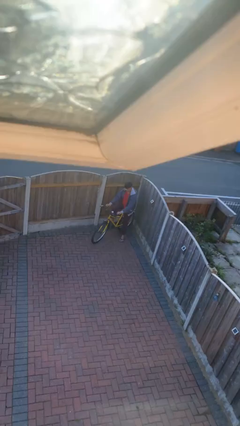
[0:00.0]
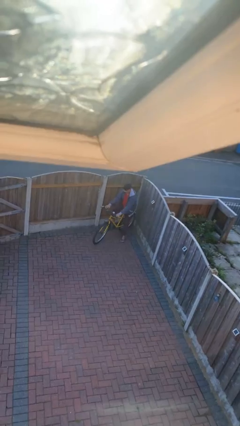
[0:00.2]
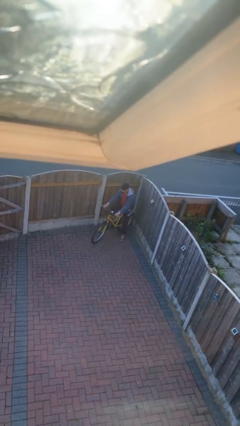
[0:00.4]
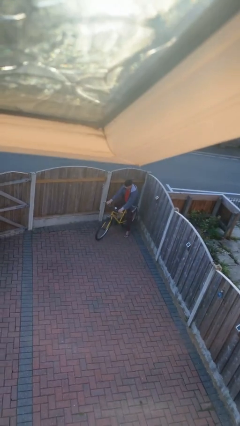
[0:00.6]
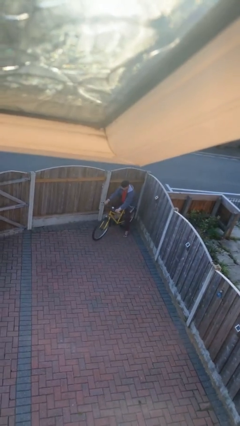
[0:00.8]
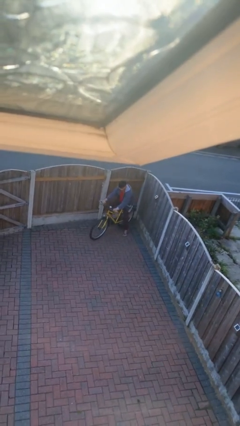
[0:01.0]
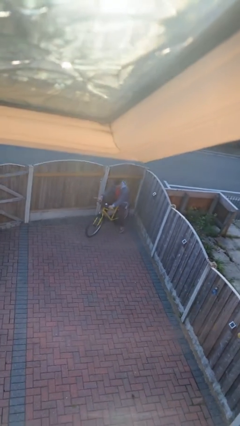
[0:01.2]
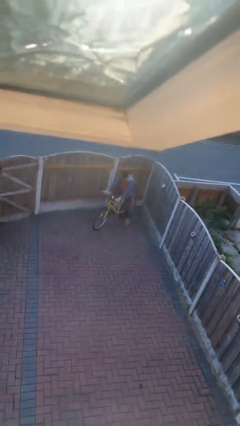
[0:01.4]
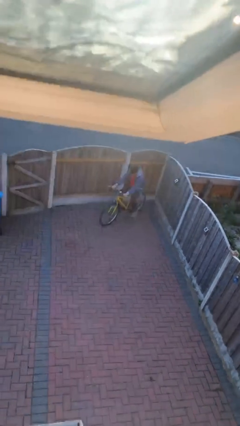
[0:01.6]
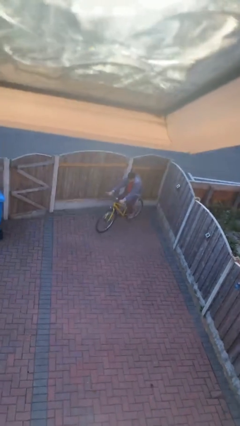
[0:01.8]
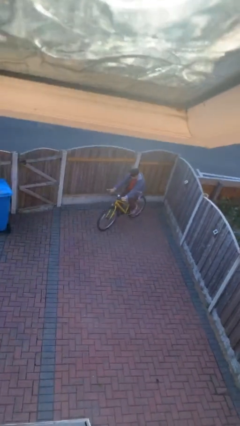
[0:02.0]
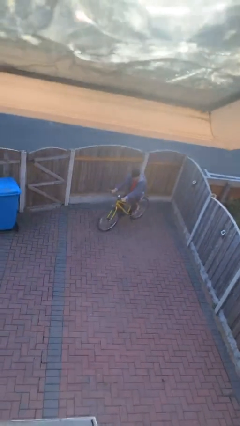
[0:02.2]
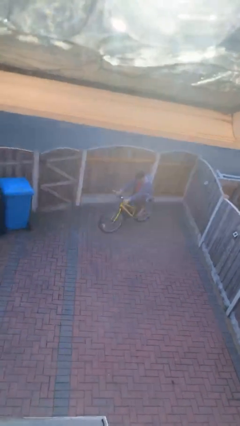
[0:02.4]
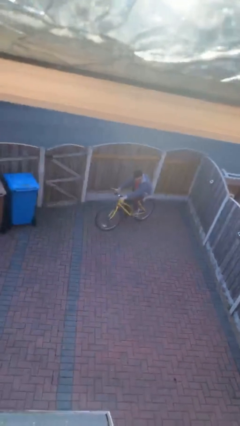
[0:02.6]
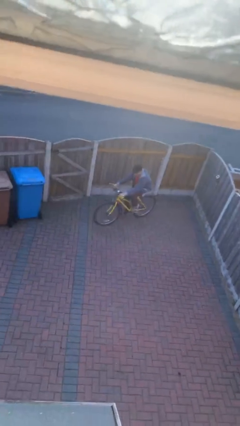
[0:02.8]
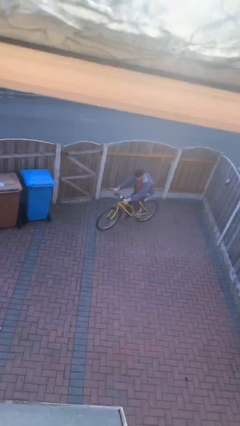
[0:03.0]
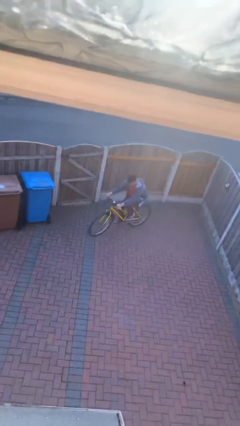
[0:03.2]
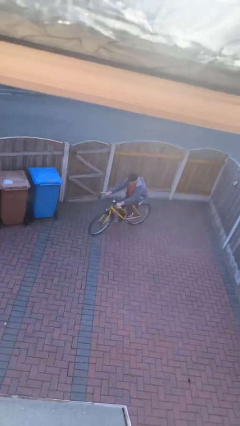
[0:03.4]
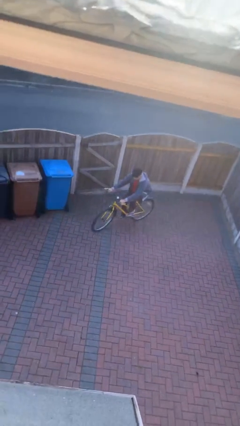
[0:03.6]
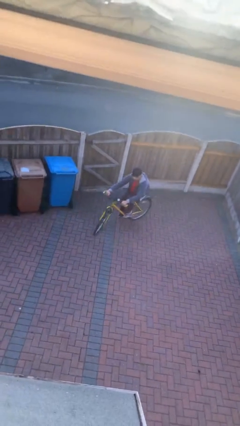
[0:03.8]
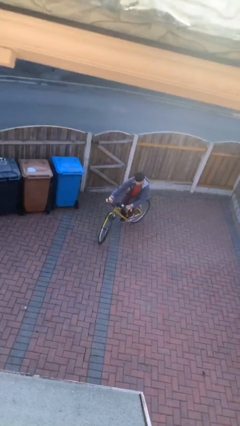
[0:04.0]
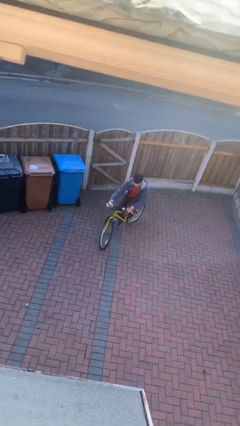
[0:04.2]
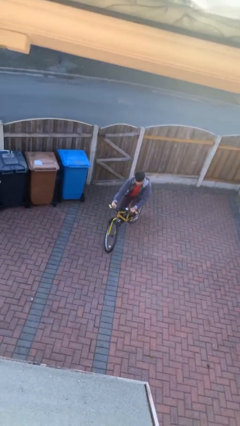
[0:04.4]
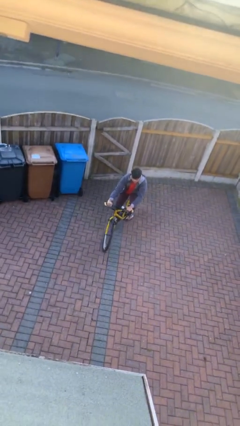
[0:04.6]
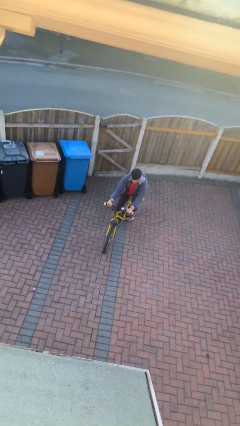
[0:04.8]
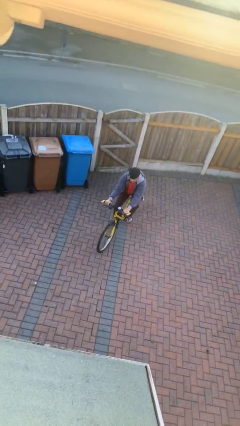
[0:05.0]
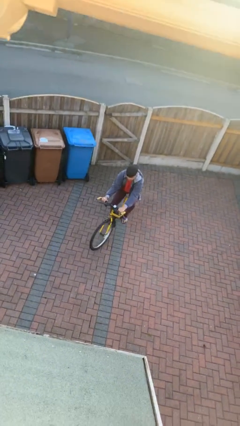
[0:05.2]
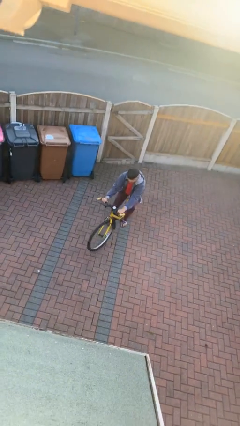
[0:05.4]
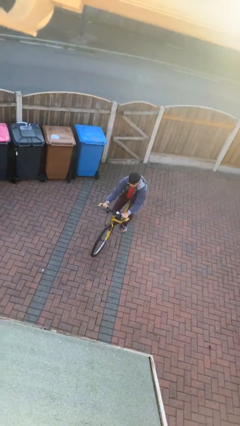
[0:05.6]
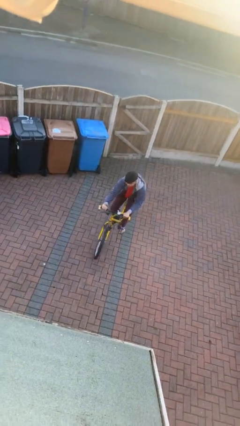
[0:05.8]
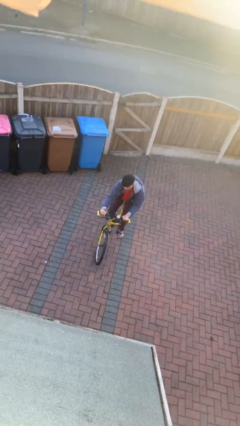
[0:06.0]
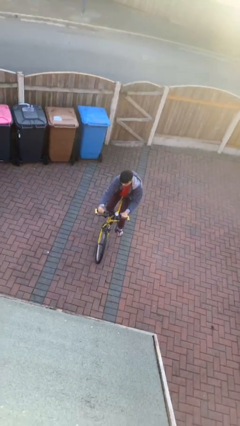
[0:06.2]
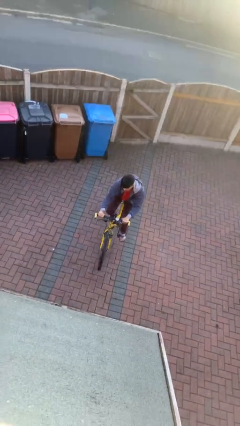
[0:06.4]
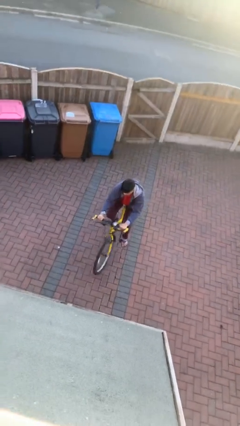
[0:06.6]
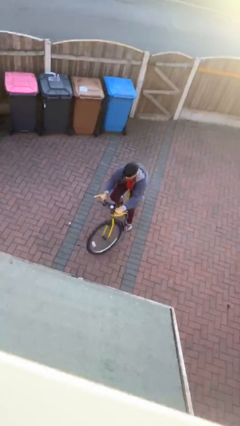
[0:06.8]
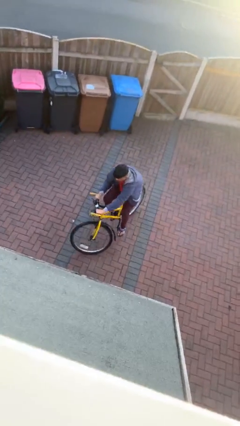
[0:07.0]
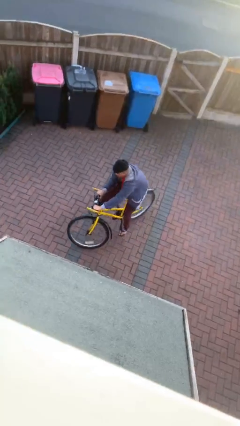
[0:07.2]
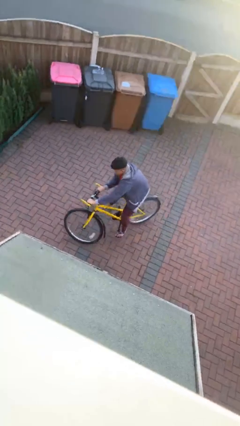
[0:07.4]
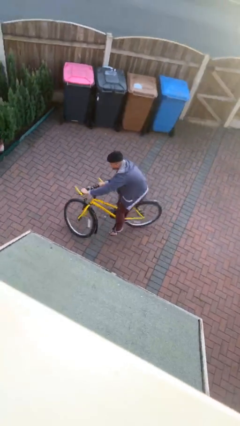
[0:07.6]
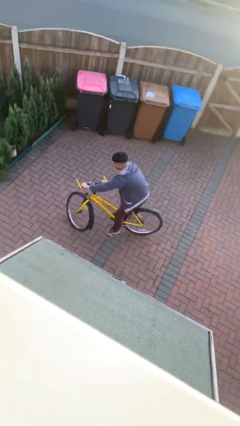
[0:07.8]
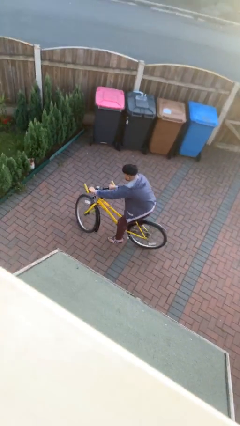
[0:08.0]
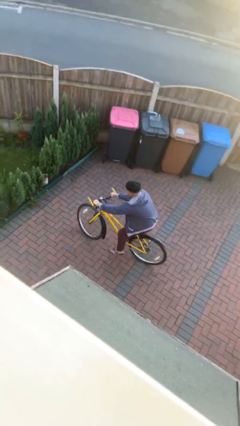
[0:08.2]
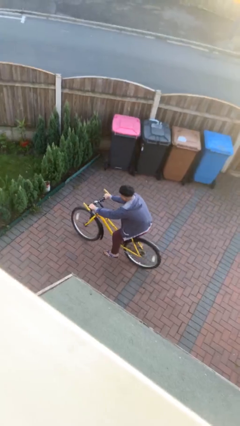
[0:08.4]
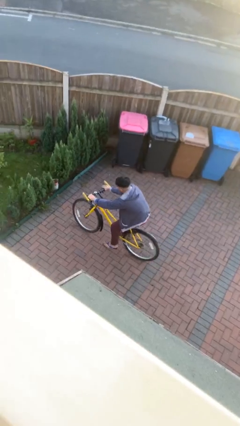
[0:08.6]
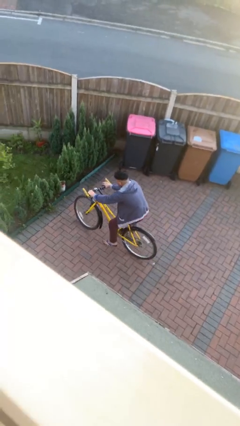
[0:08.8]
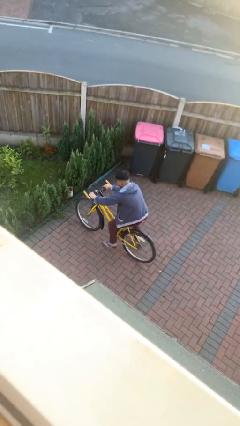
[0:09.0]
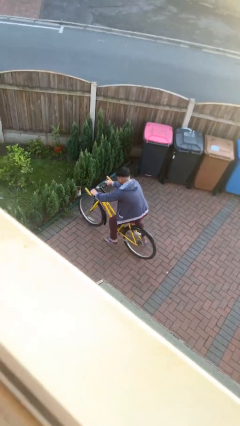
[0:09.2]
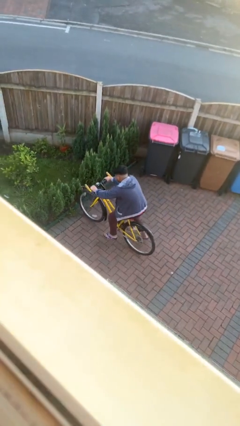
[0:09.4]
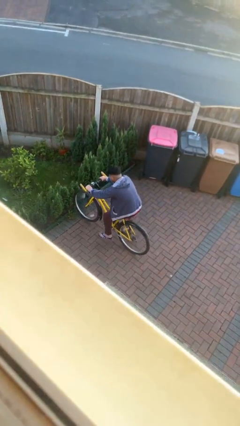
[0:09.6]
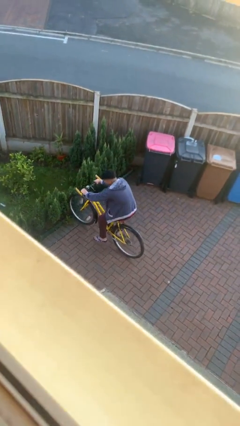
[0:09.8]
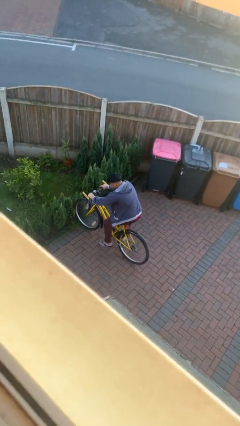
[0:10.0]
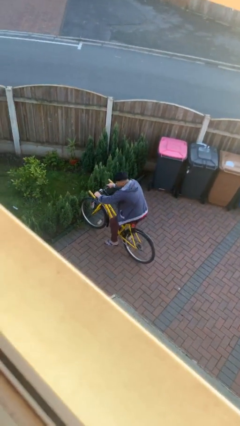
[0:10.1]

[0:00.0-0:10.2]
person rides bicycle

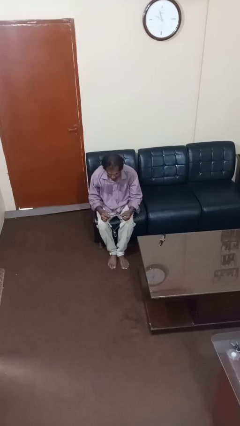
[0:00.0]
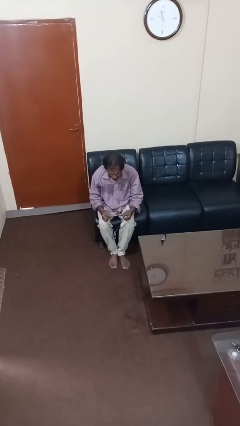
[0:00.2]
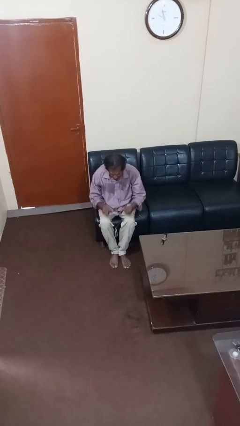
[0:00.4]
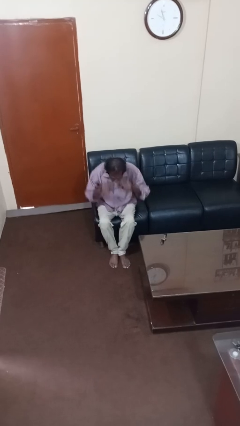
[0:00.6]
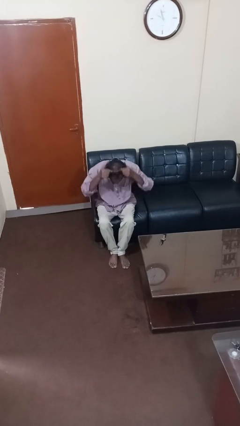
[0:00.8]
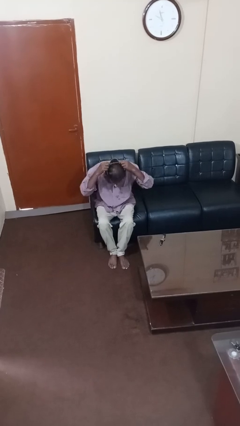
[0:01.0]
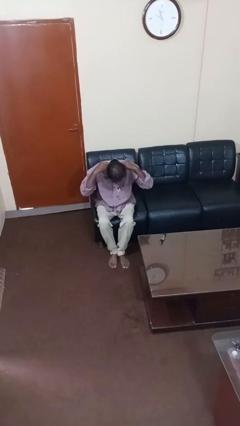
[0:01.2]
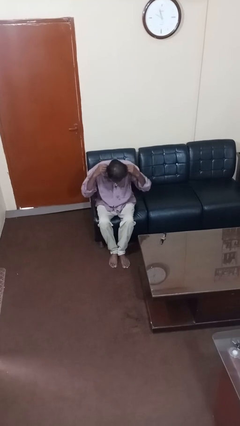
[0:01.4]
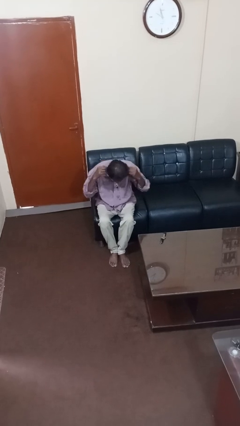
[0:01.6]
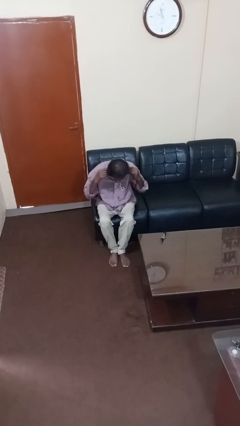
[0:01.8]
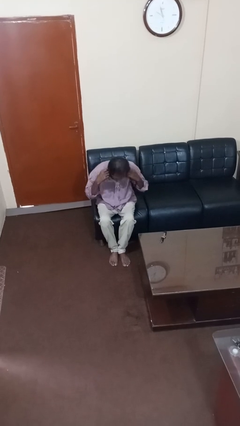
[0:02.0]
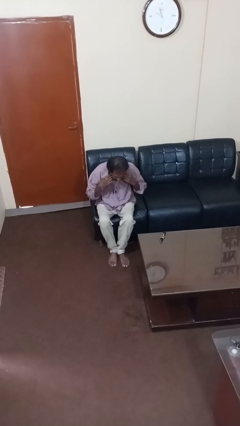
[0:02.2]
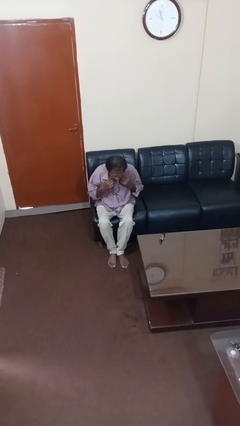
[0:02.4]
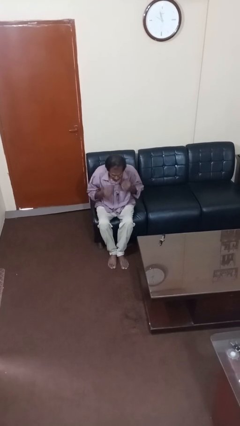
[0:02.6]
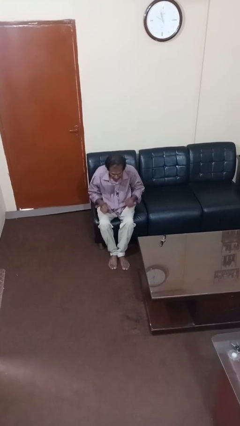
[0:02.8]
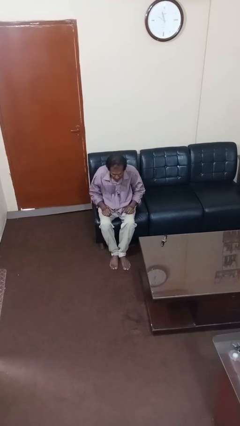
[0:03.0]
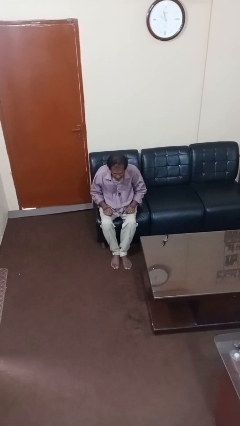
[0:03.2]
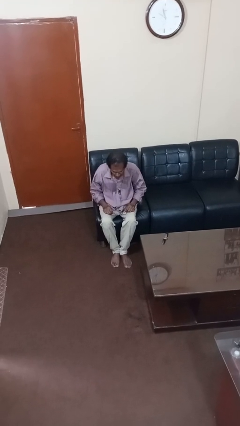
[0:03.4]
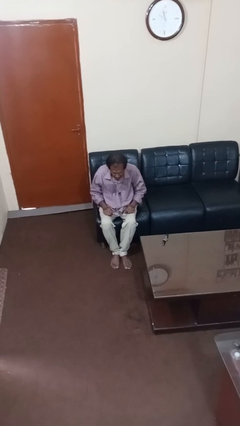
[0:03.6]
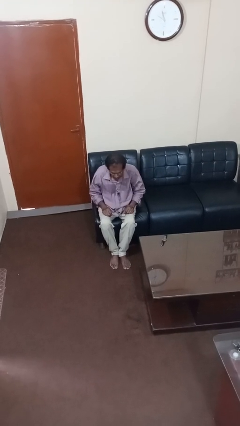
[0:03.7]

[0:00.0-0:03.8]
person puts on necklace

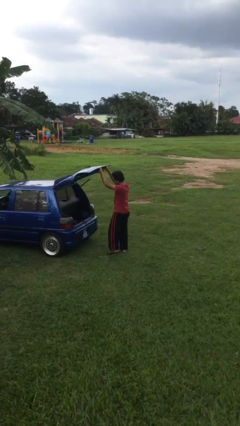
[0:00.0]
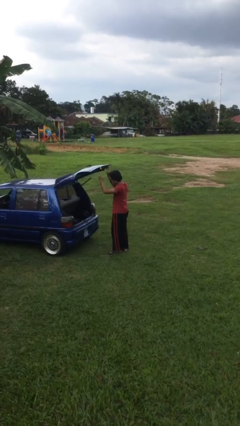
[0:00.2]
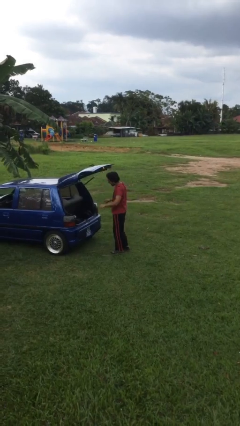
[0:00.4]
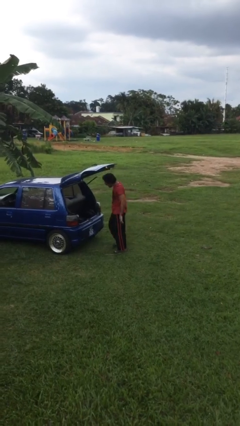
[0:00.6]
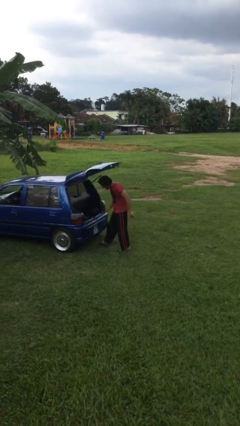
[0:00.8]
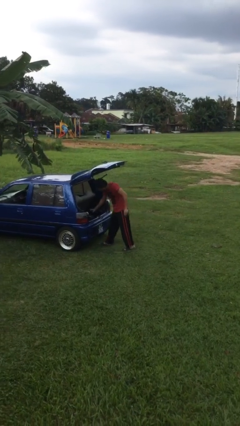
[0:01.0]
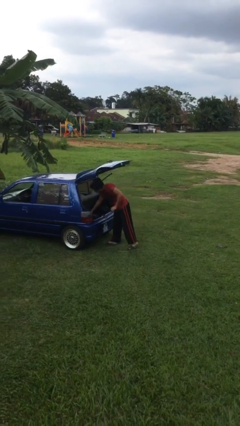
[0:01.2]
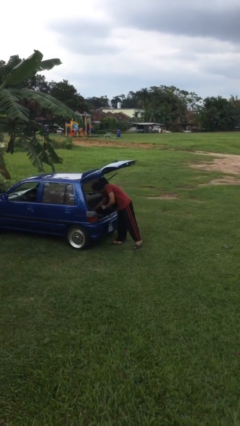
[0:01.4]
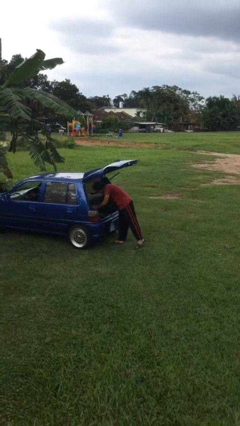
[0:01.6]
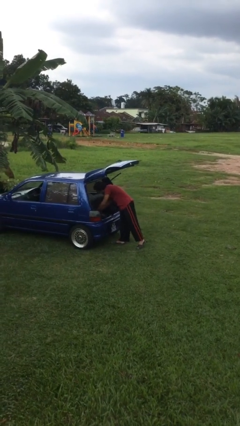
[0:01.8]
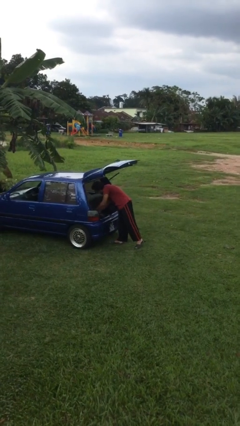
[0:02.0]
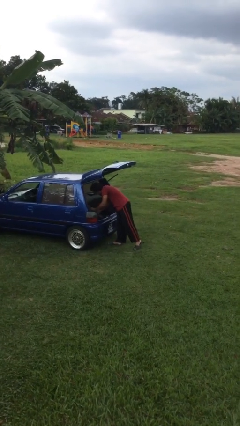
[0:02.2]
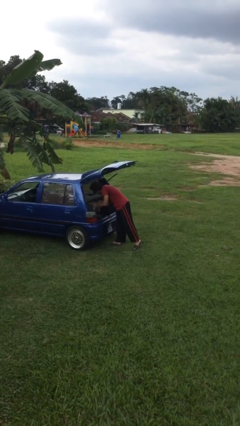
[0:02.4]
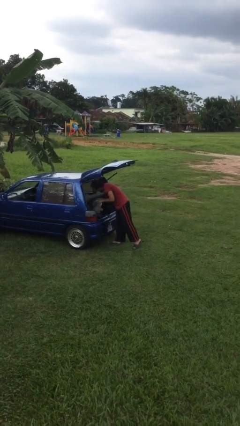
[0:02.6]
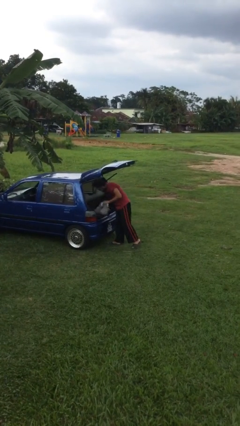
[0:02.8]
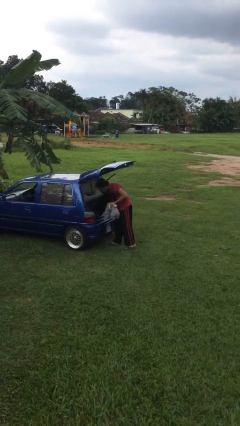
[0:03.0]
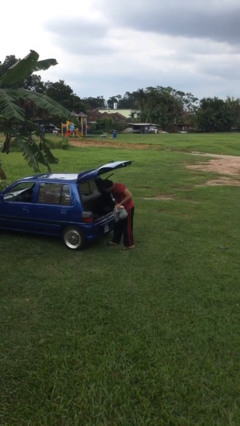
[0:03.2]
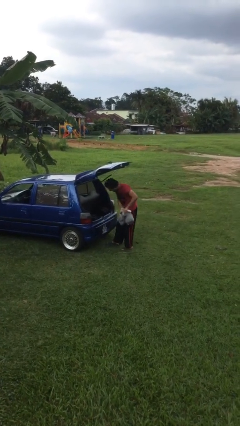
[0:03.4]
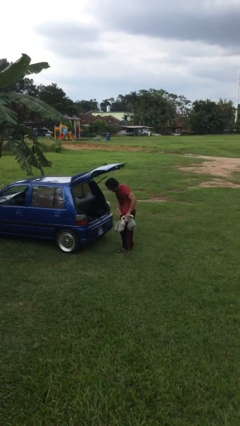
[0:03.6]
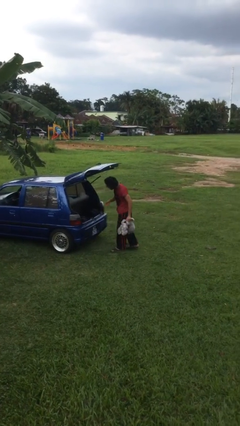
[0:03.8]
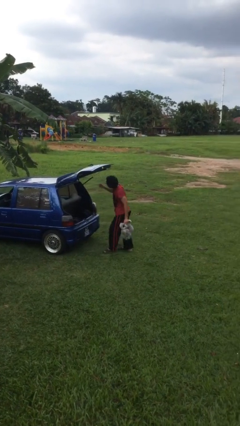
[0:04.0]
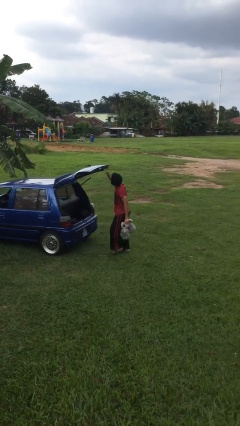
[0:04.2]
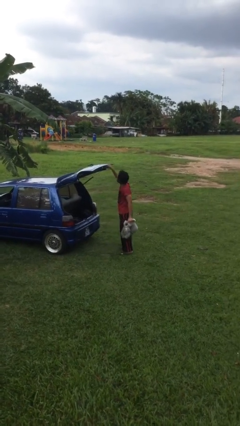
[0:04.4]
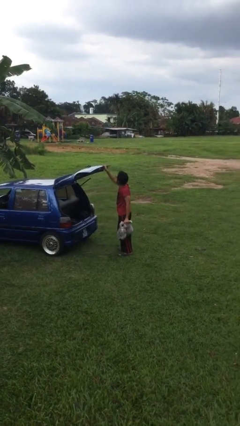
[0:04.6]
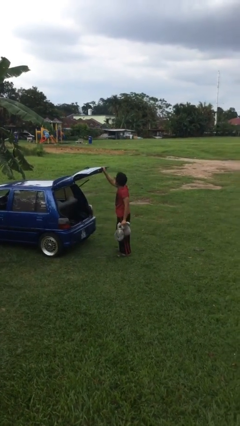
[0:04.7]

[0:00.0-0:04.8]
person unloads car
